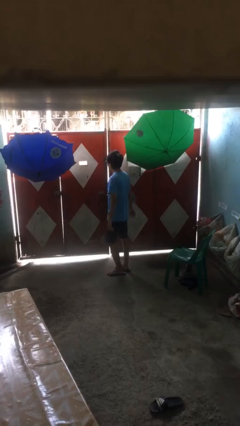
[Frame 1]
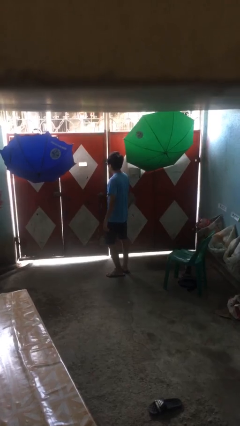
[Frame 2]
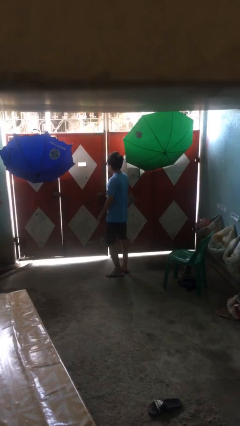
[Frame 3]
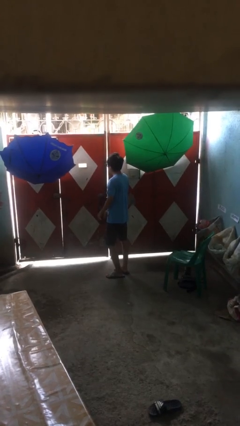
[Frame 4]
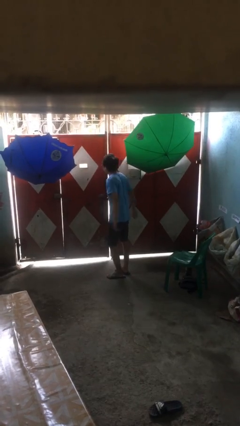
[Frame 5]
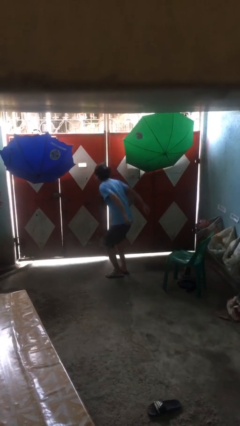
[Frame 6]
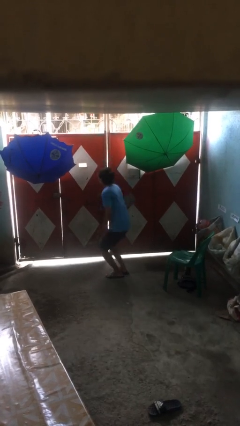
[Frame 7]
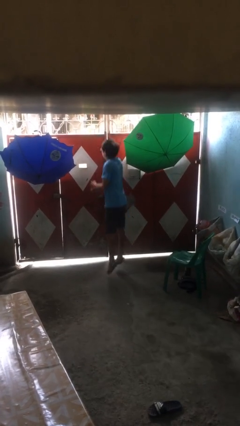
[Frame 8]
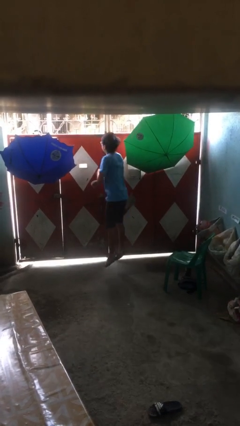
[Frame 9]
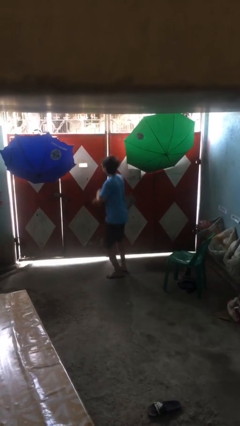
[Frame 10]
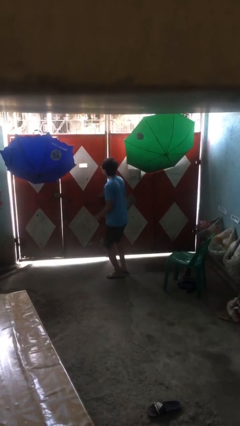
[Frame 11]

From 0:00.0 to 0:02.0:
person jumps

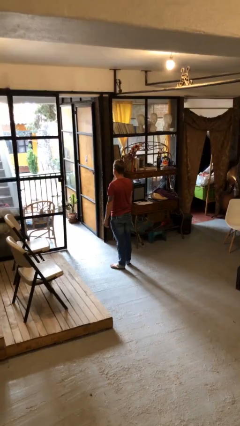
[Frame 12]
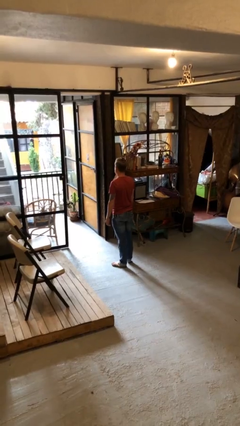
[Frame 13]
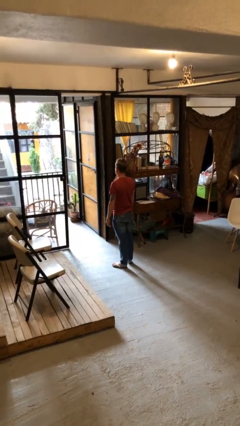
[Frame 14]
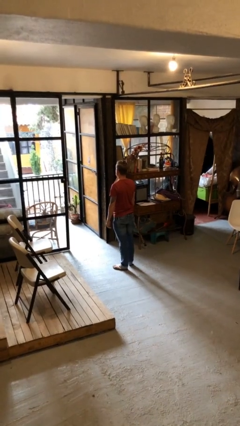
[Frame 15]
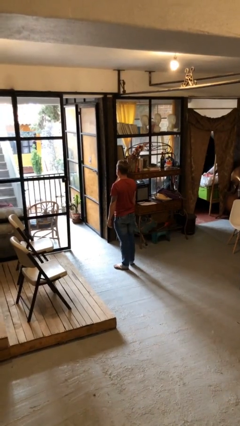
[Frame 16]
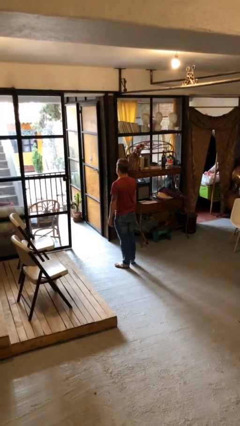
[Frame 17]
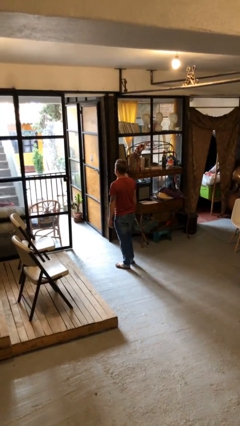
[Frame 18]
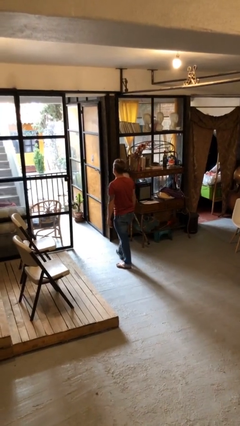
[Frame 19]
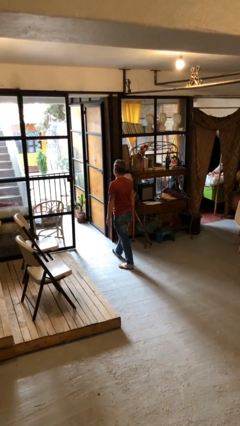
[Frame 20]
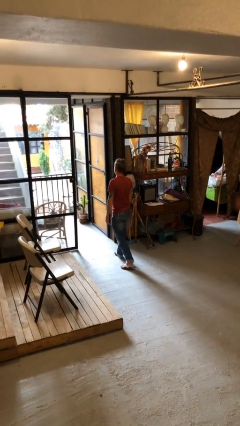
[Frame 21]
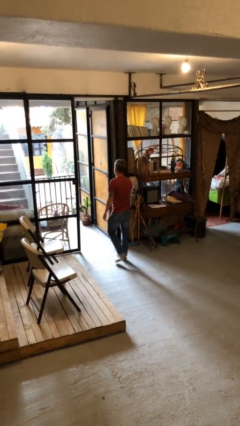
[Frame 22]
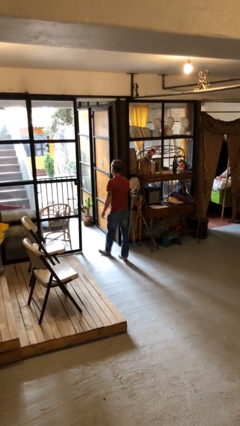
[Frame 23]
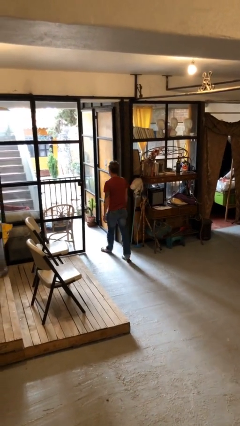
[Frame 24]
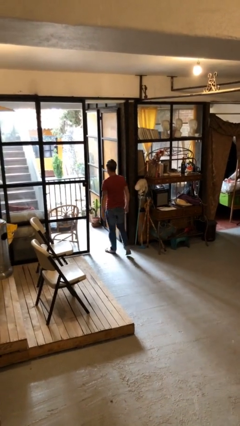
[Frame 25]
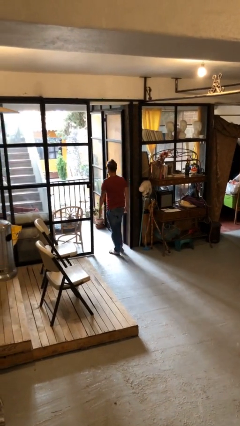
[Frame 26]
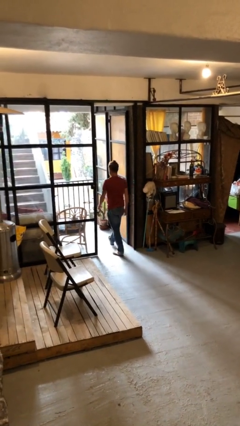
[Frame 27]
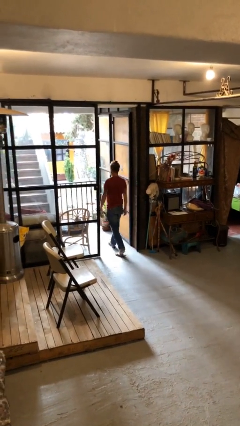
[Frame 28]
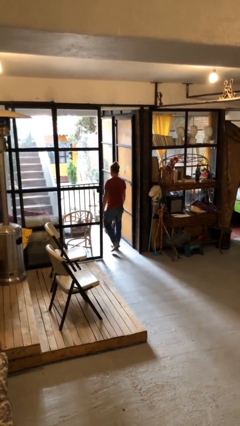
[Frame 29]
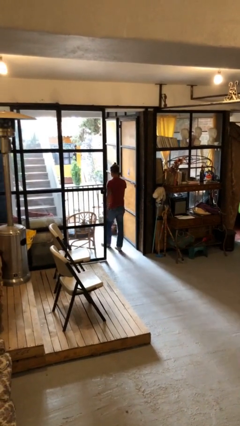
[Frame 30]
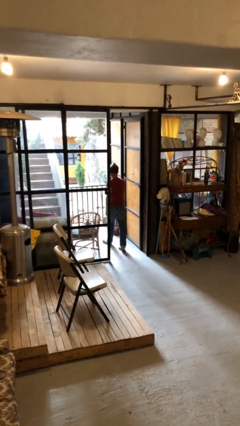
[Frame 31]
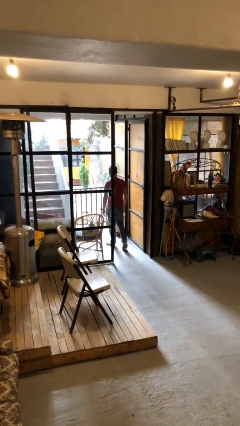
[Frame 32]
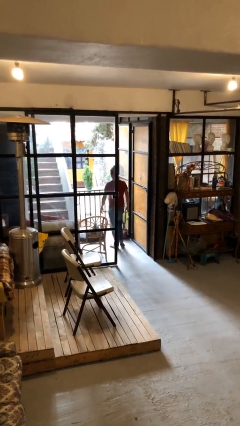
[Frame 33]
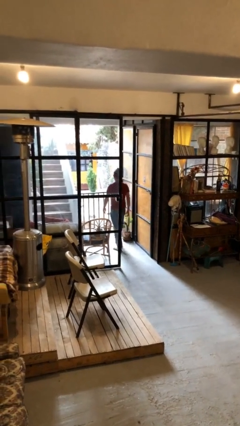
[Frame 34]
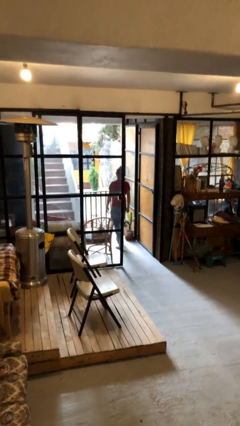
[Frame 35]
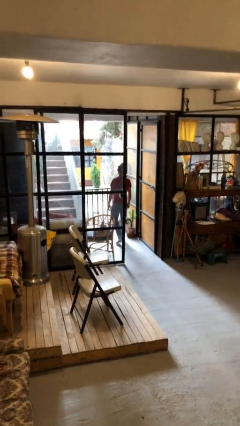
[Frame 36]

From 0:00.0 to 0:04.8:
person exits scene through structure

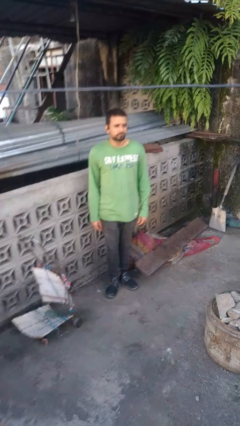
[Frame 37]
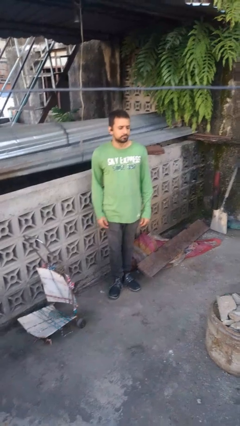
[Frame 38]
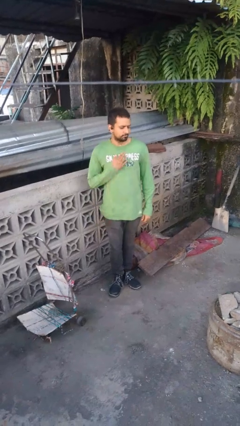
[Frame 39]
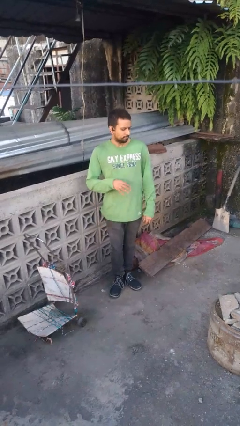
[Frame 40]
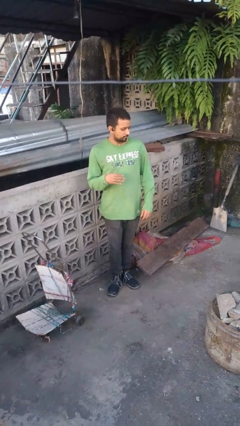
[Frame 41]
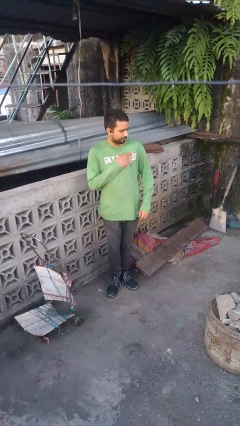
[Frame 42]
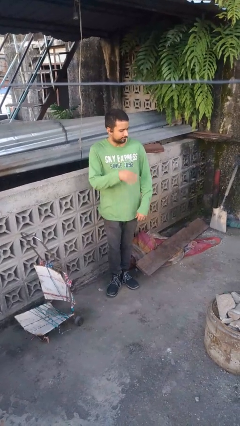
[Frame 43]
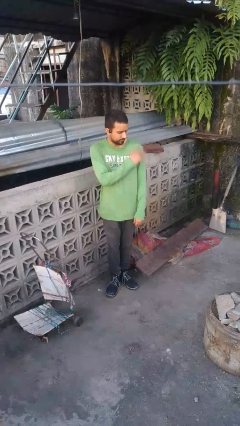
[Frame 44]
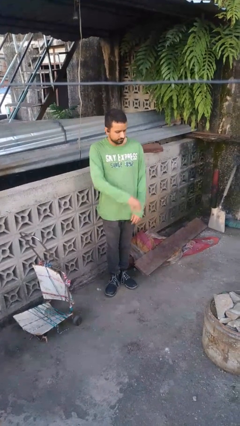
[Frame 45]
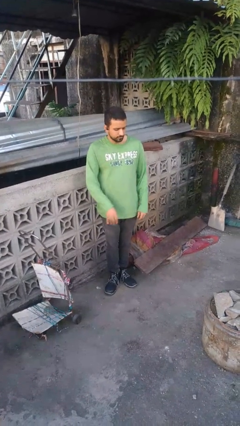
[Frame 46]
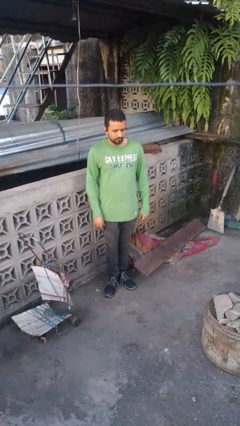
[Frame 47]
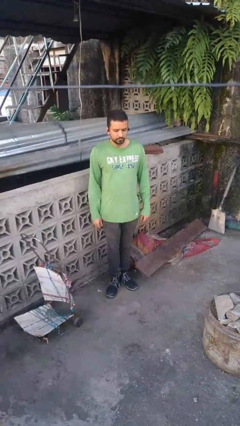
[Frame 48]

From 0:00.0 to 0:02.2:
person swats bug

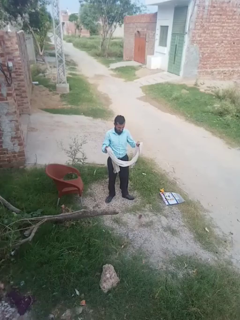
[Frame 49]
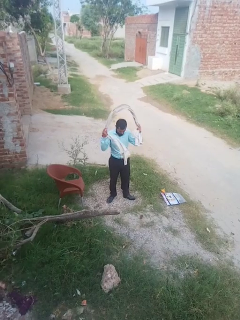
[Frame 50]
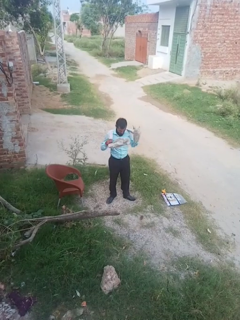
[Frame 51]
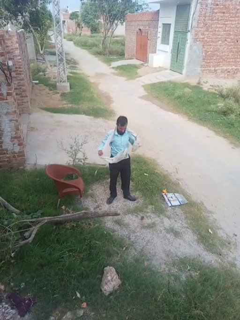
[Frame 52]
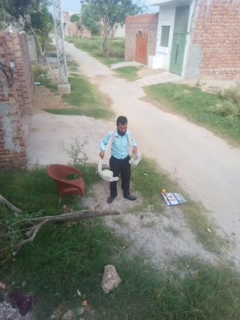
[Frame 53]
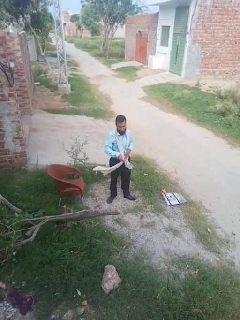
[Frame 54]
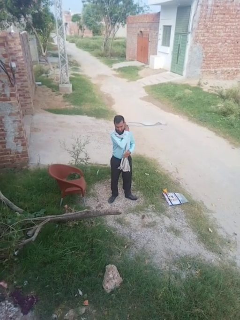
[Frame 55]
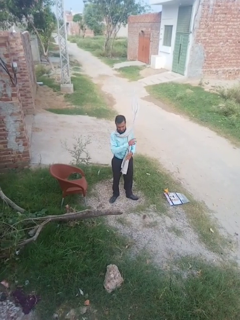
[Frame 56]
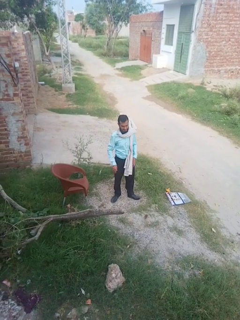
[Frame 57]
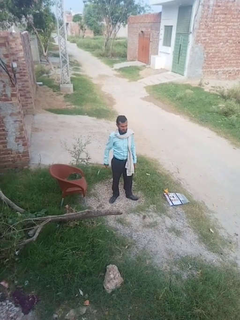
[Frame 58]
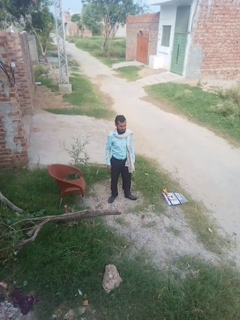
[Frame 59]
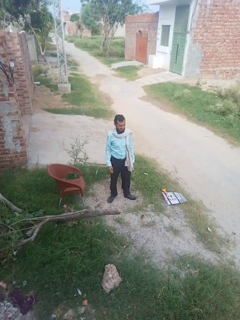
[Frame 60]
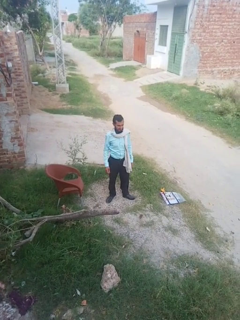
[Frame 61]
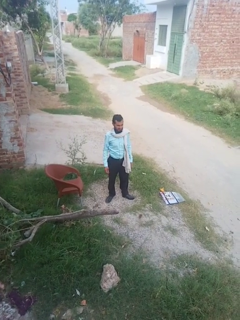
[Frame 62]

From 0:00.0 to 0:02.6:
person puts on scarf

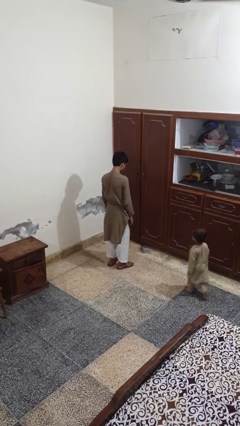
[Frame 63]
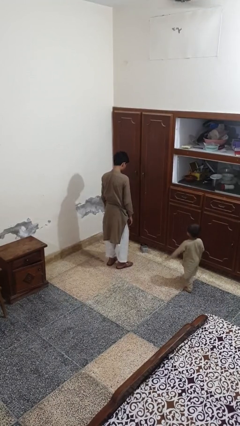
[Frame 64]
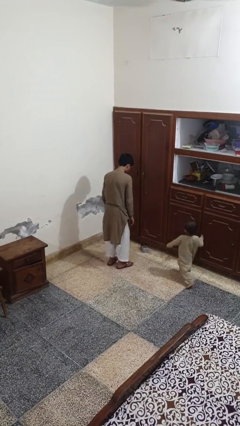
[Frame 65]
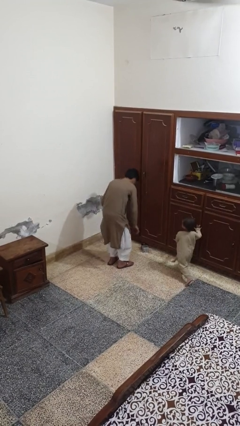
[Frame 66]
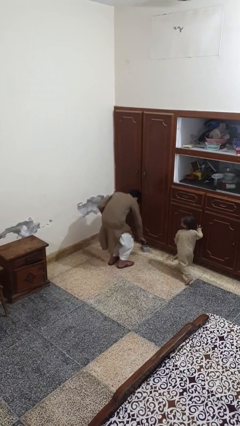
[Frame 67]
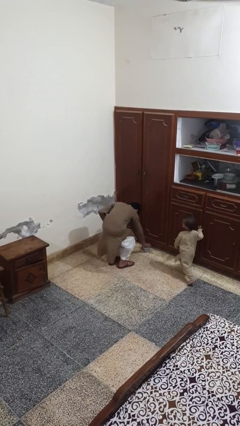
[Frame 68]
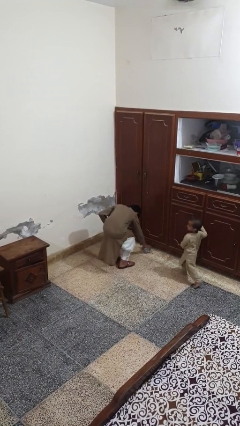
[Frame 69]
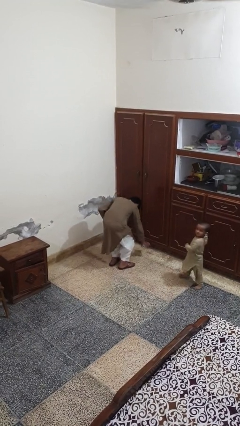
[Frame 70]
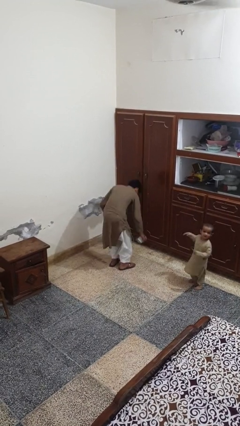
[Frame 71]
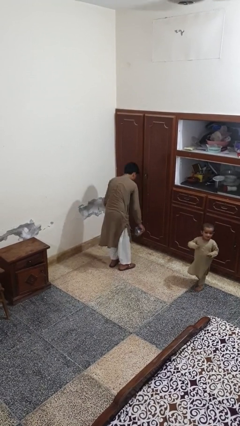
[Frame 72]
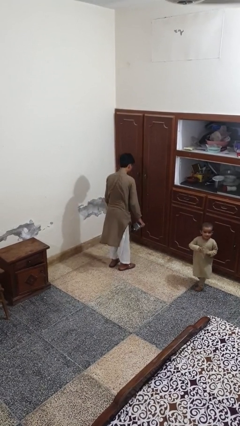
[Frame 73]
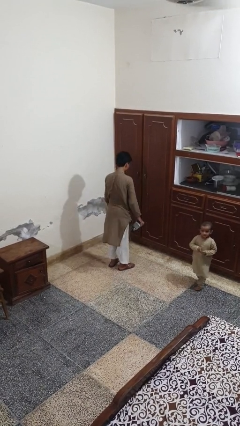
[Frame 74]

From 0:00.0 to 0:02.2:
person picks up object from floor

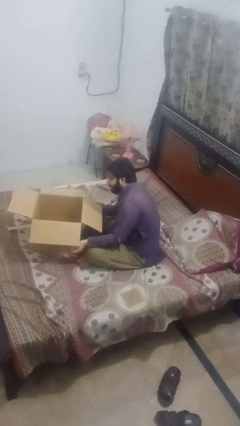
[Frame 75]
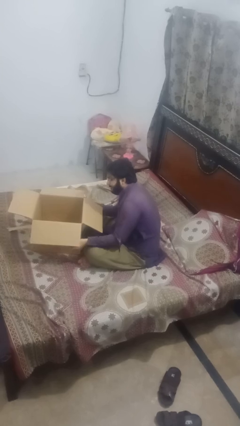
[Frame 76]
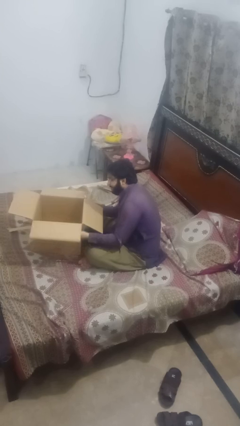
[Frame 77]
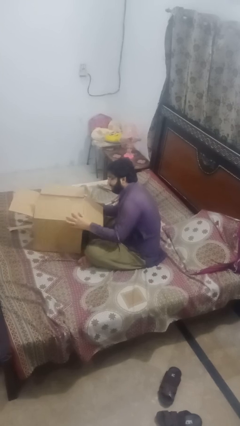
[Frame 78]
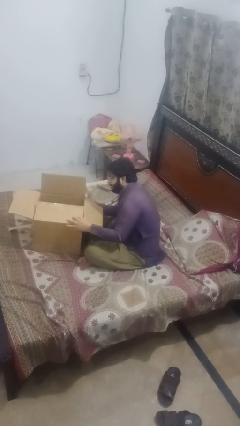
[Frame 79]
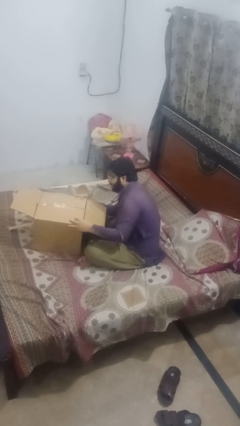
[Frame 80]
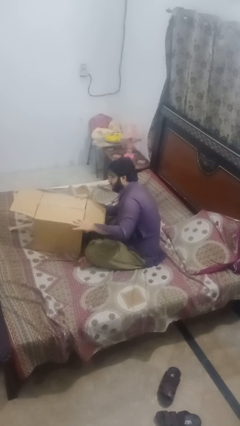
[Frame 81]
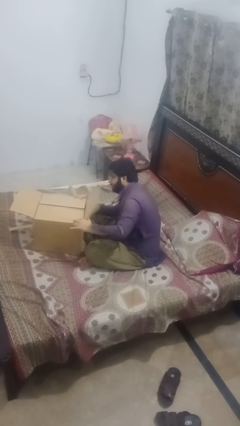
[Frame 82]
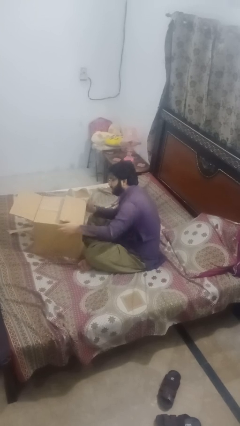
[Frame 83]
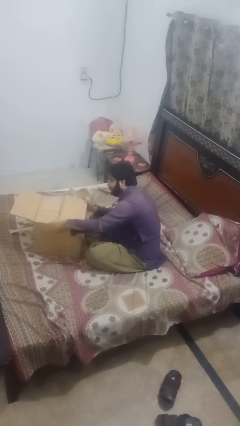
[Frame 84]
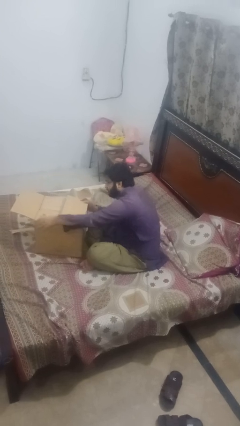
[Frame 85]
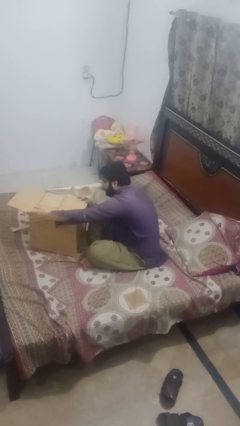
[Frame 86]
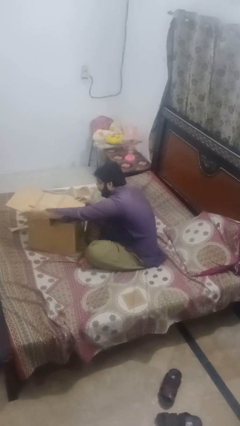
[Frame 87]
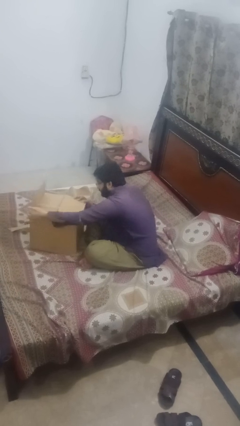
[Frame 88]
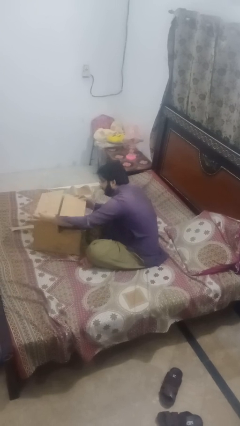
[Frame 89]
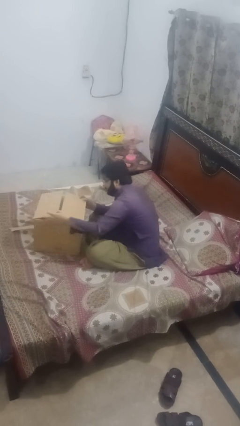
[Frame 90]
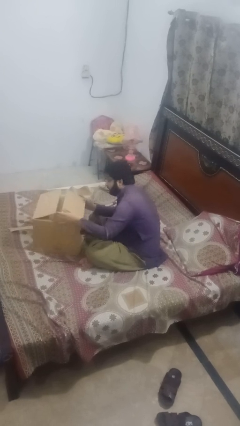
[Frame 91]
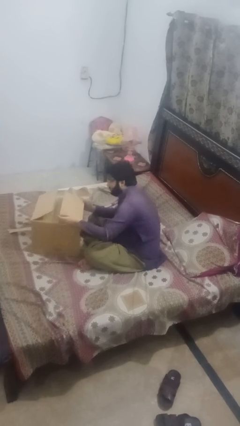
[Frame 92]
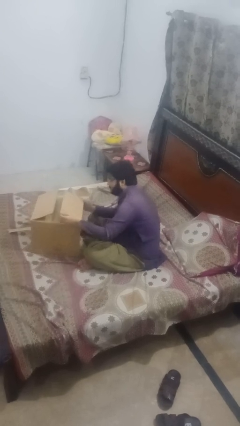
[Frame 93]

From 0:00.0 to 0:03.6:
person closes box

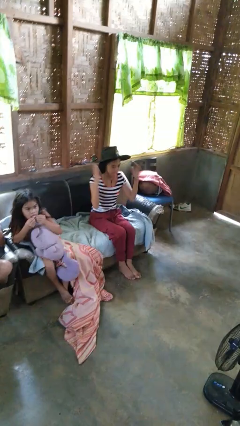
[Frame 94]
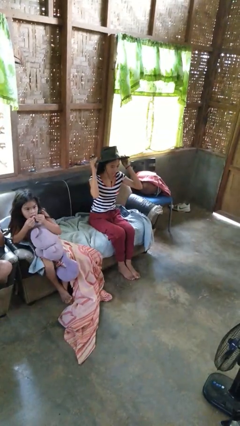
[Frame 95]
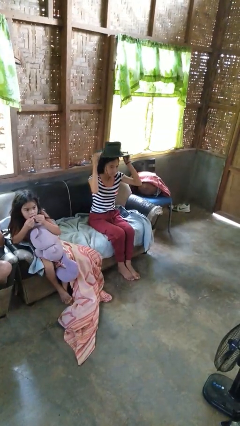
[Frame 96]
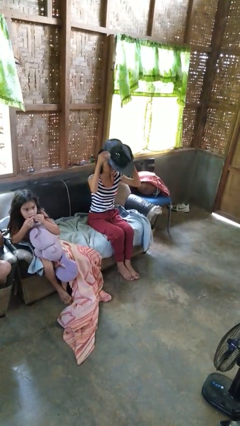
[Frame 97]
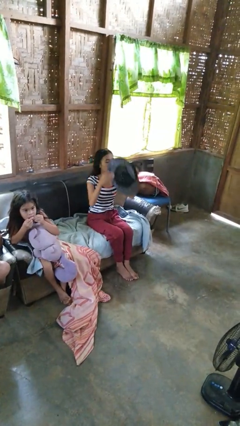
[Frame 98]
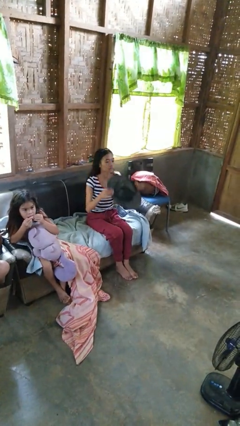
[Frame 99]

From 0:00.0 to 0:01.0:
person takes off hat
